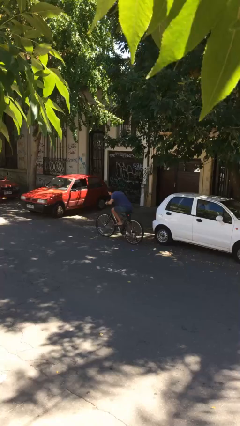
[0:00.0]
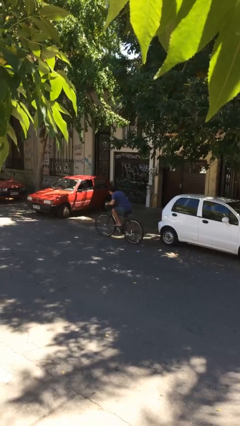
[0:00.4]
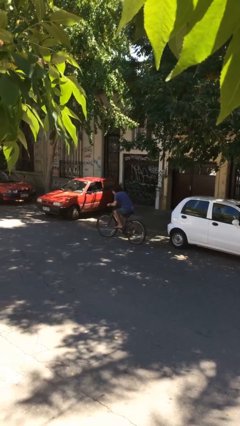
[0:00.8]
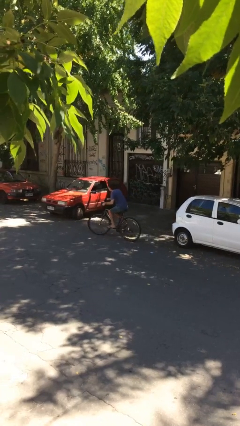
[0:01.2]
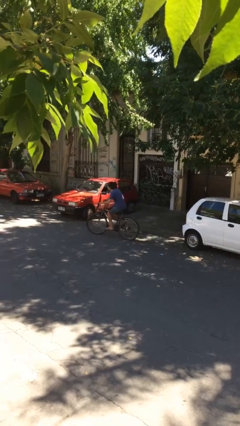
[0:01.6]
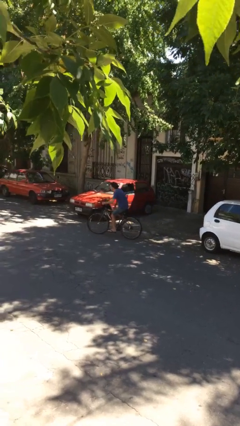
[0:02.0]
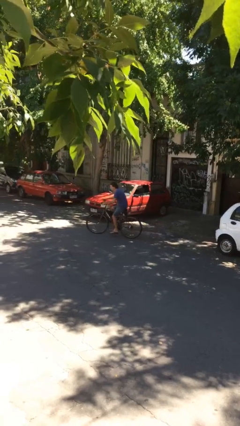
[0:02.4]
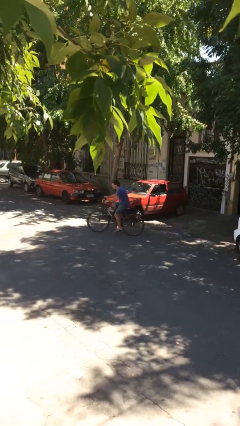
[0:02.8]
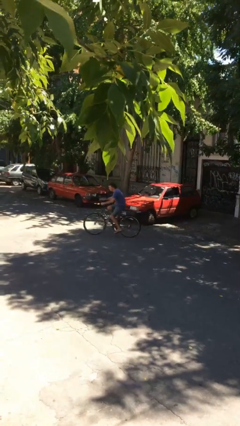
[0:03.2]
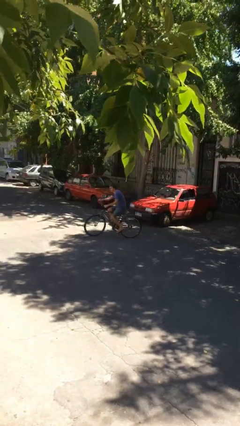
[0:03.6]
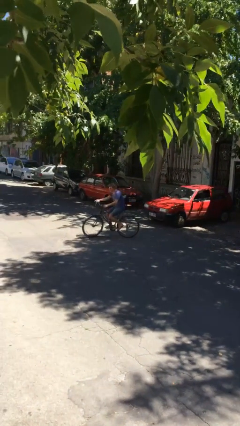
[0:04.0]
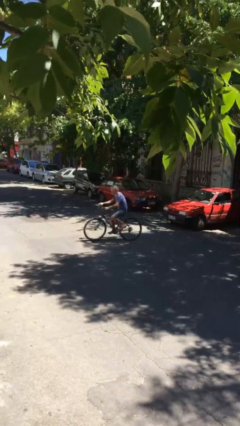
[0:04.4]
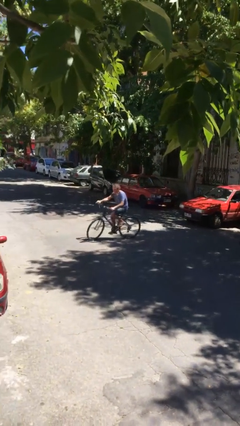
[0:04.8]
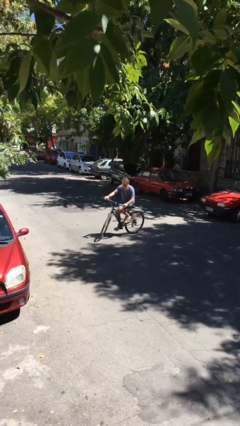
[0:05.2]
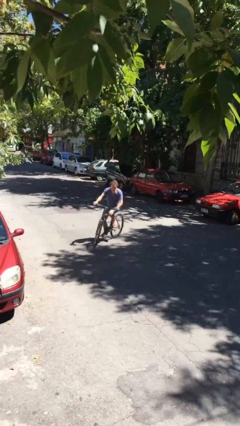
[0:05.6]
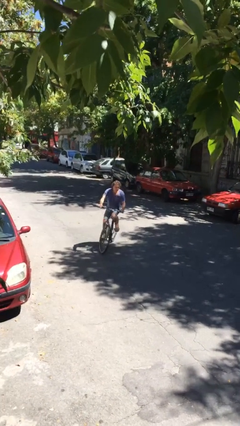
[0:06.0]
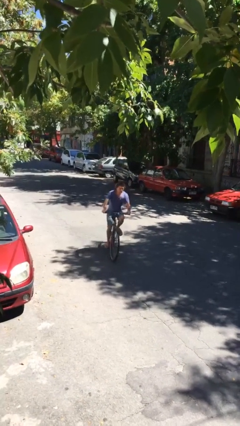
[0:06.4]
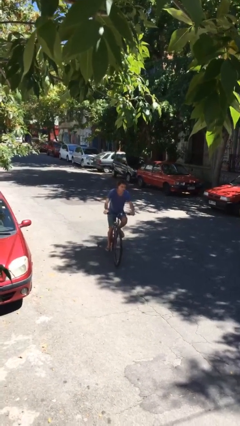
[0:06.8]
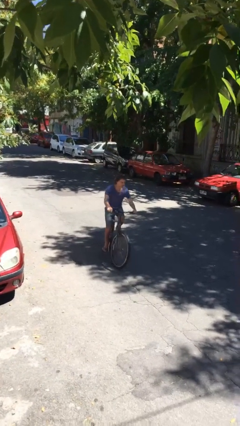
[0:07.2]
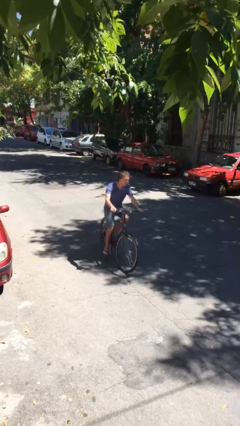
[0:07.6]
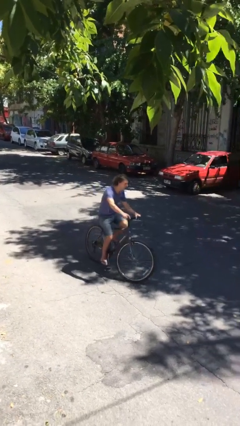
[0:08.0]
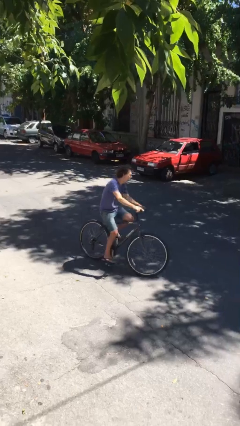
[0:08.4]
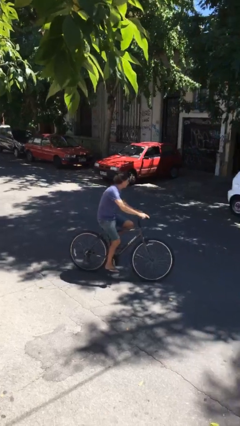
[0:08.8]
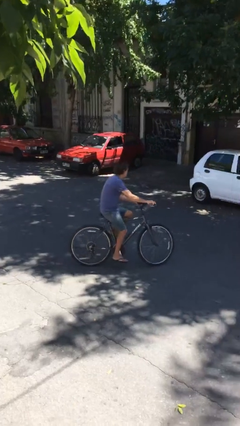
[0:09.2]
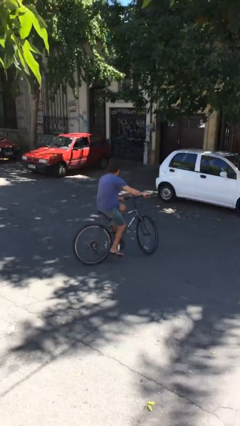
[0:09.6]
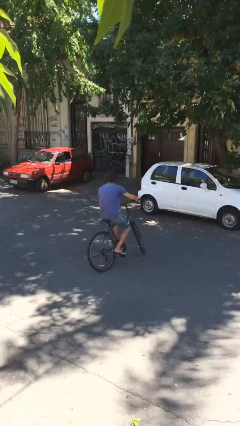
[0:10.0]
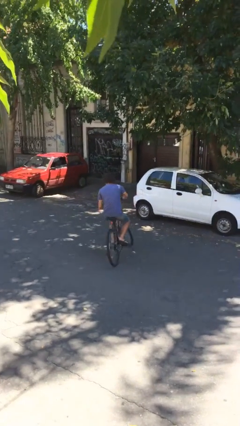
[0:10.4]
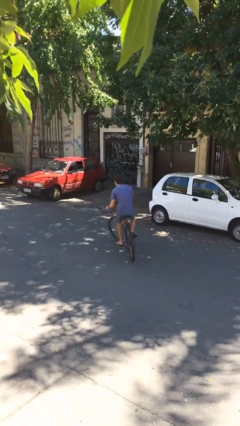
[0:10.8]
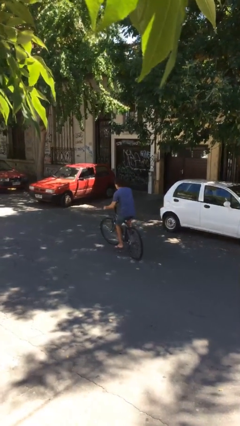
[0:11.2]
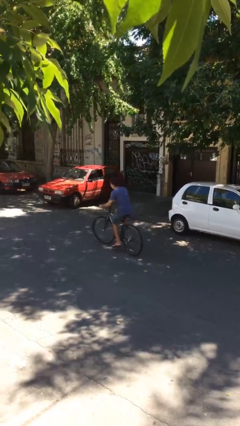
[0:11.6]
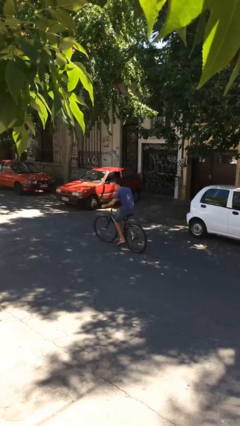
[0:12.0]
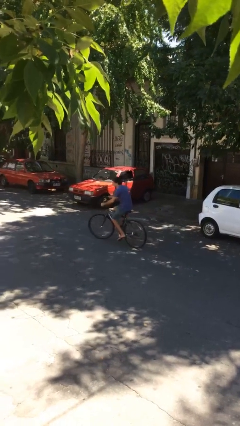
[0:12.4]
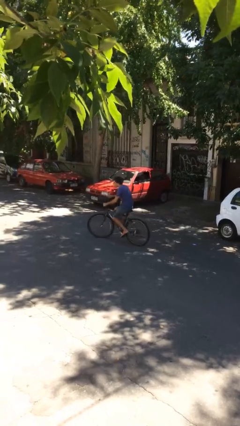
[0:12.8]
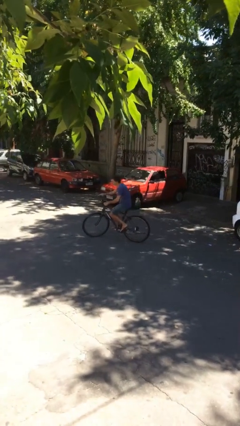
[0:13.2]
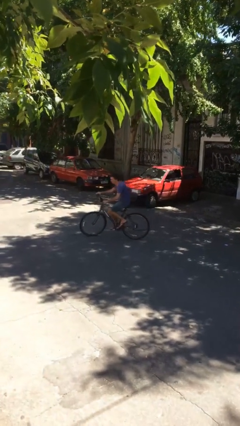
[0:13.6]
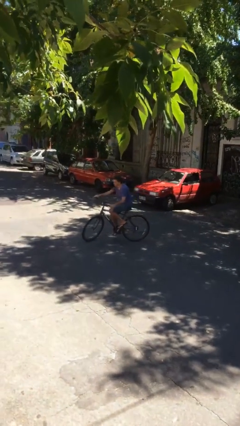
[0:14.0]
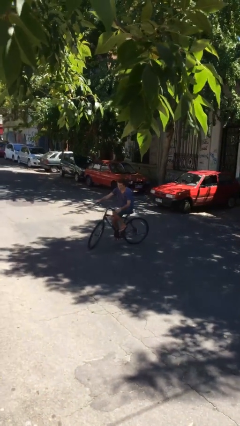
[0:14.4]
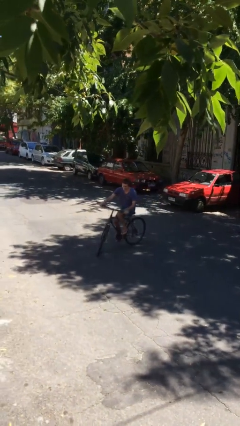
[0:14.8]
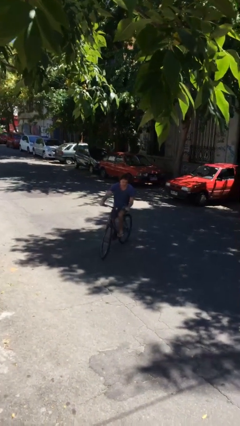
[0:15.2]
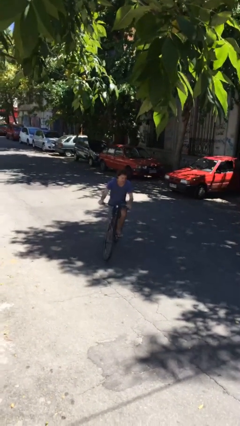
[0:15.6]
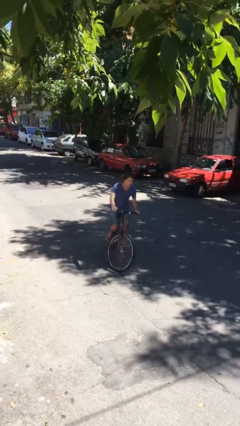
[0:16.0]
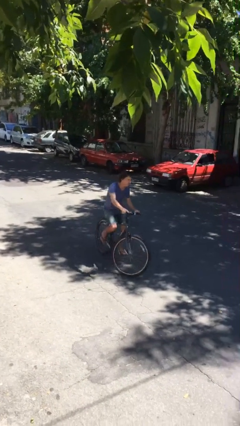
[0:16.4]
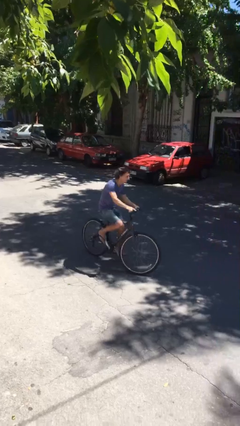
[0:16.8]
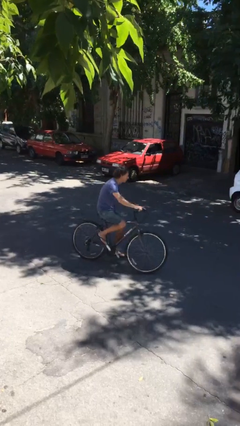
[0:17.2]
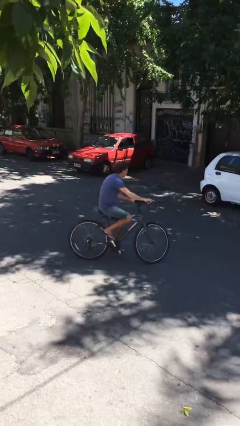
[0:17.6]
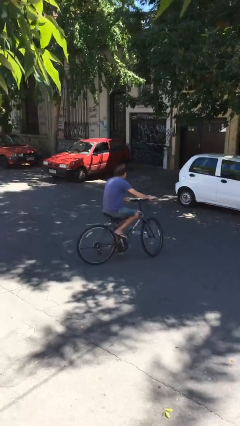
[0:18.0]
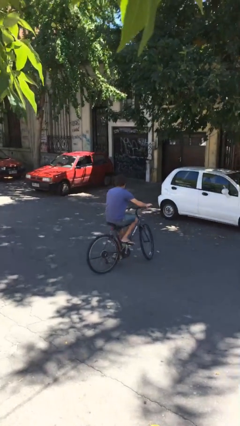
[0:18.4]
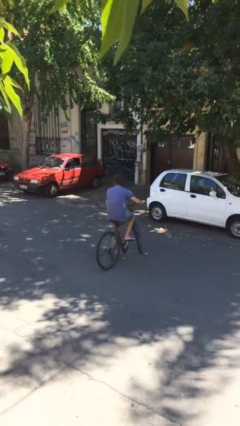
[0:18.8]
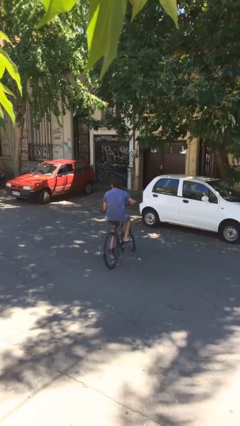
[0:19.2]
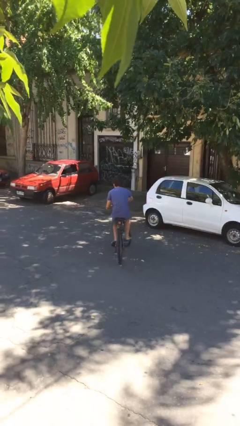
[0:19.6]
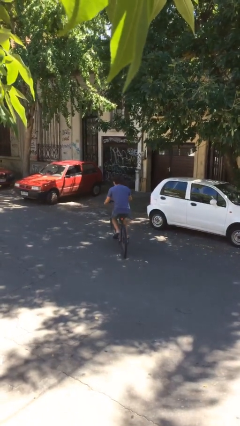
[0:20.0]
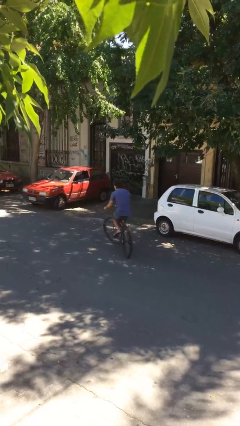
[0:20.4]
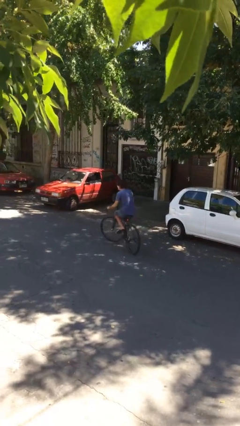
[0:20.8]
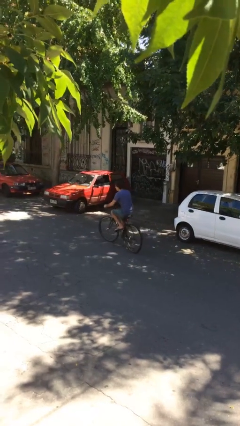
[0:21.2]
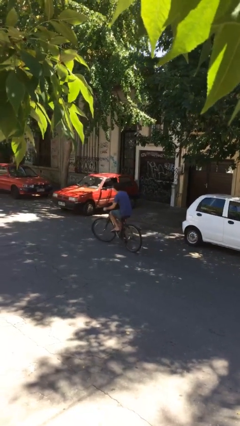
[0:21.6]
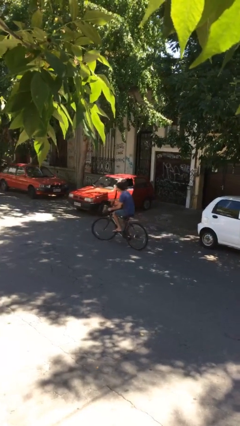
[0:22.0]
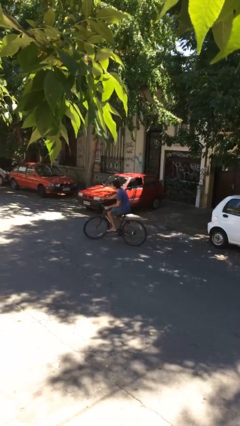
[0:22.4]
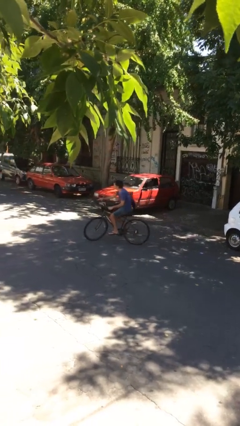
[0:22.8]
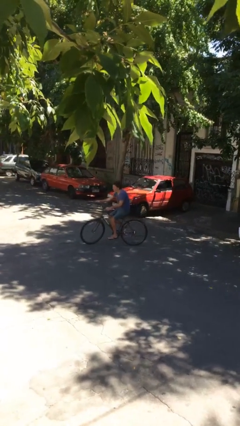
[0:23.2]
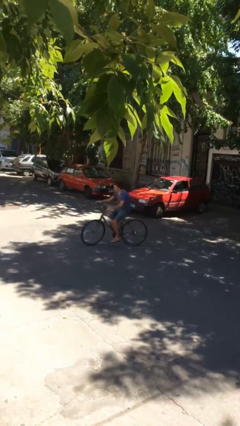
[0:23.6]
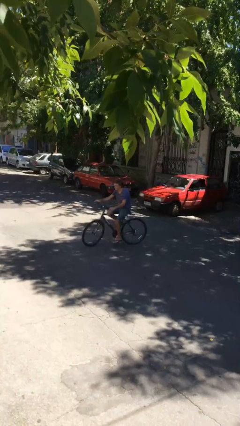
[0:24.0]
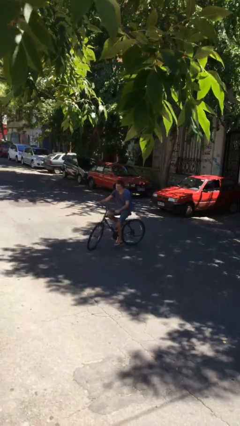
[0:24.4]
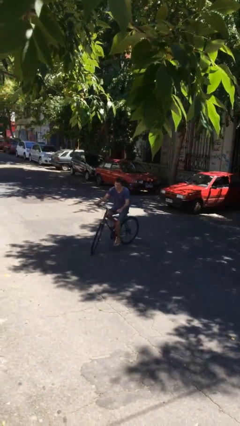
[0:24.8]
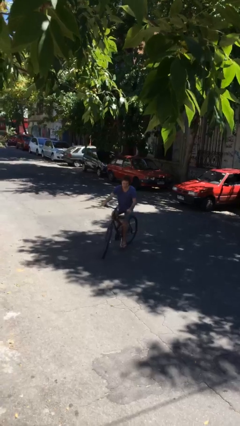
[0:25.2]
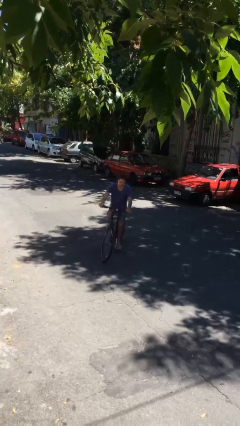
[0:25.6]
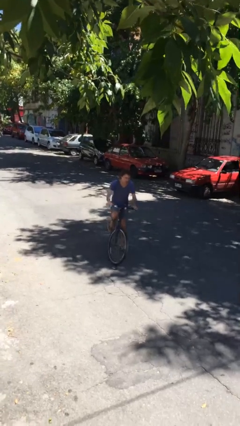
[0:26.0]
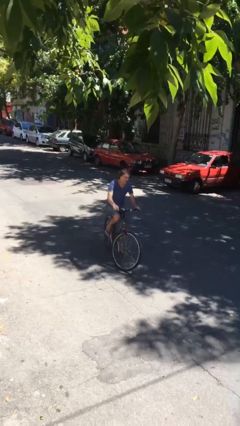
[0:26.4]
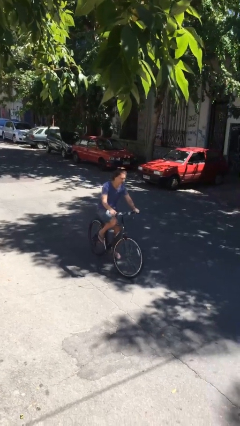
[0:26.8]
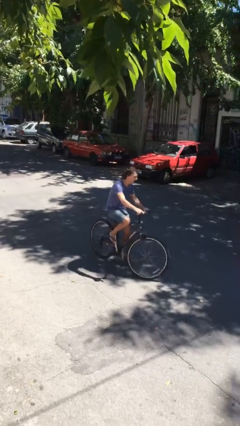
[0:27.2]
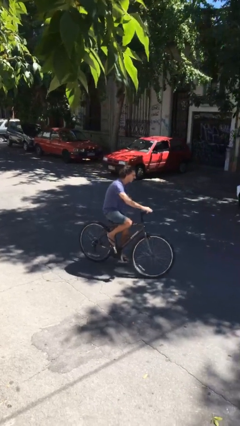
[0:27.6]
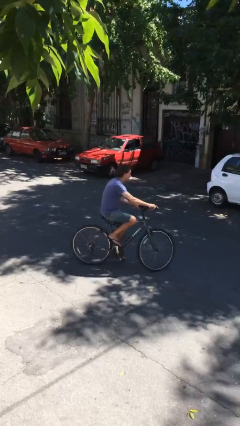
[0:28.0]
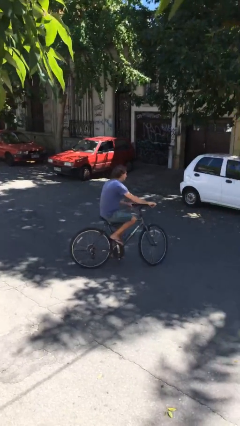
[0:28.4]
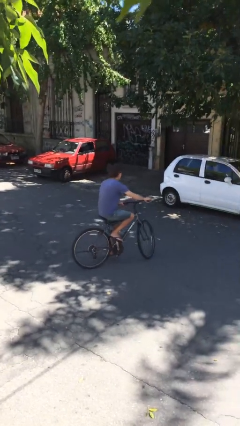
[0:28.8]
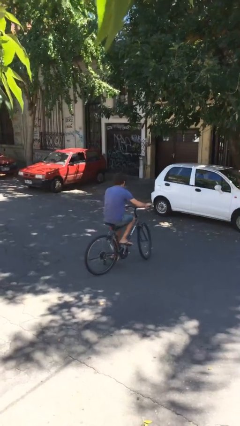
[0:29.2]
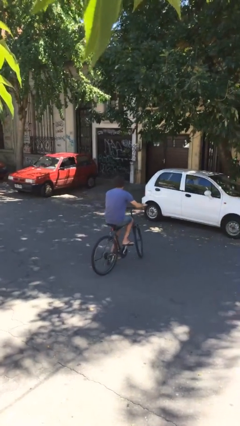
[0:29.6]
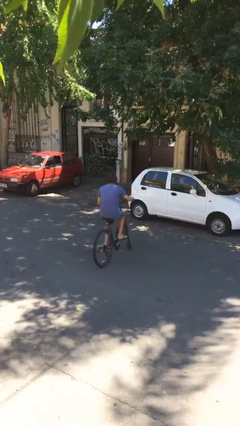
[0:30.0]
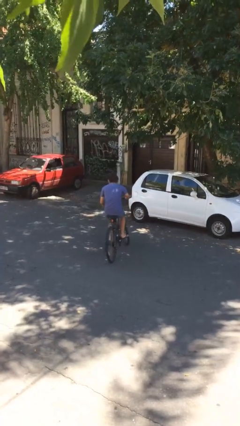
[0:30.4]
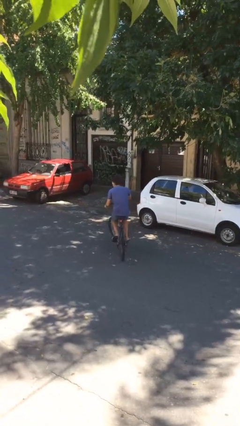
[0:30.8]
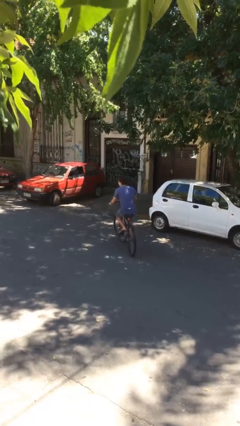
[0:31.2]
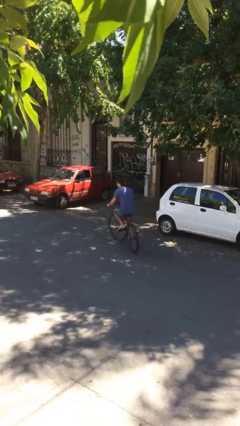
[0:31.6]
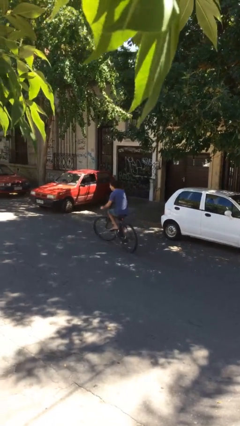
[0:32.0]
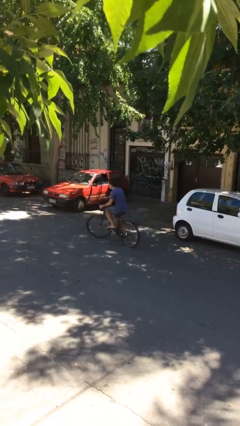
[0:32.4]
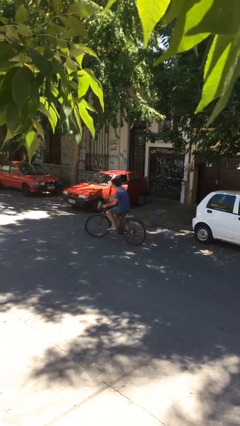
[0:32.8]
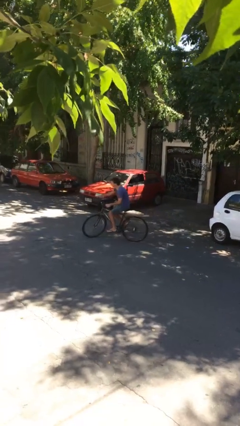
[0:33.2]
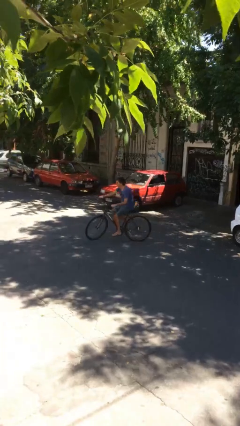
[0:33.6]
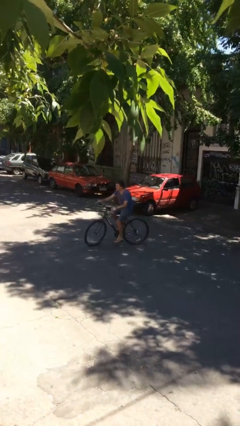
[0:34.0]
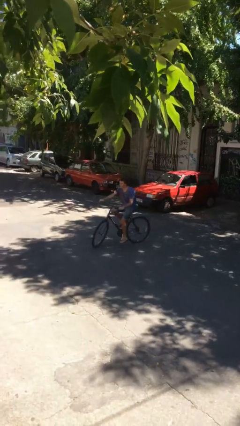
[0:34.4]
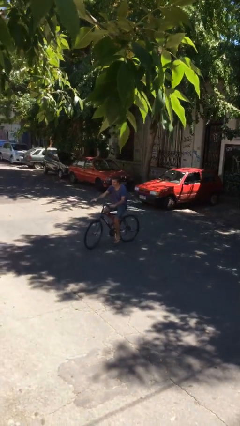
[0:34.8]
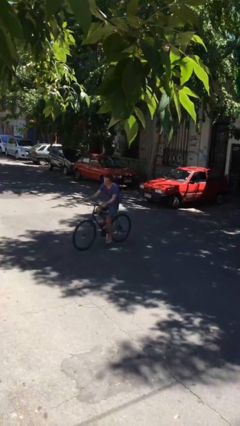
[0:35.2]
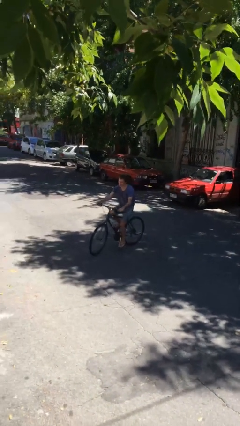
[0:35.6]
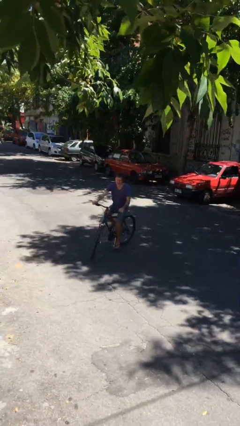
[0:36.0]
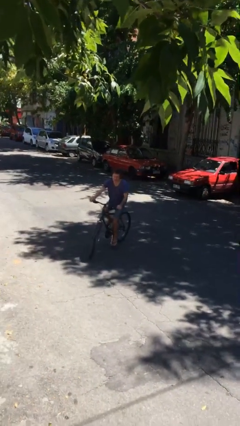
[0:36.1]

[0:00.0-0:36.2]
person rides bicycle

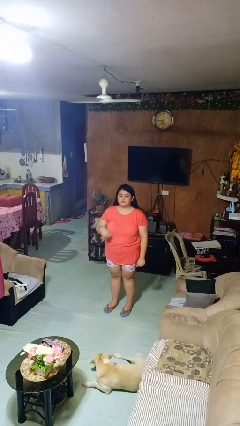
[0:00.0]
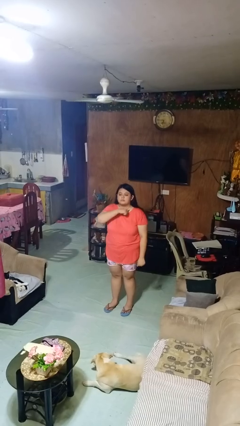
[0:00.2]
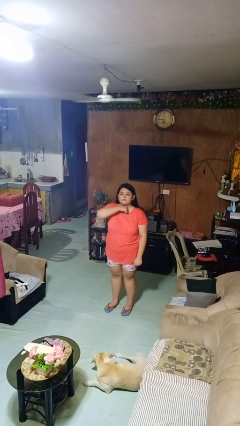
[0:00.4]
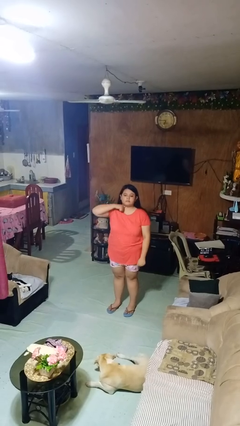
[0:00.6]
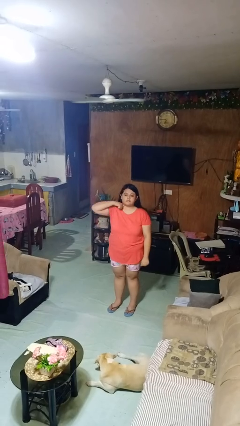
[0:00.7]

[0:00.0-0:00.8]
person gestures cut
